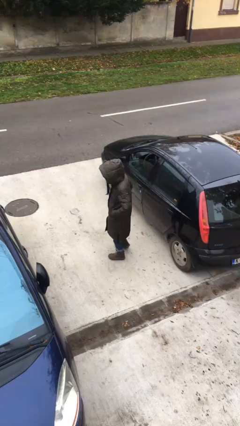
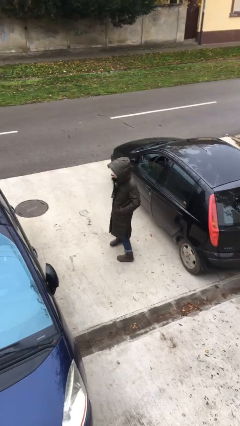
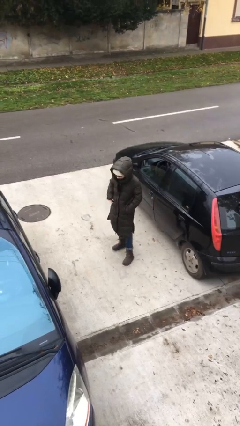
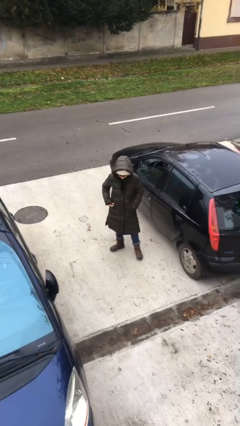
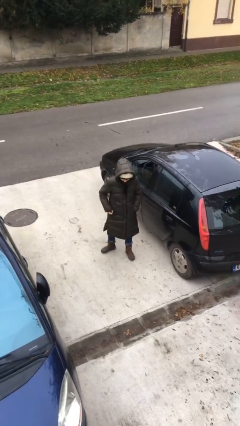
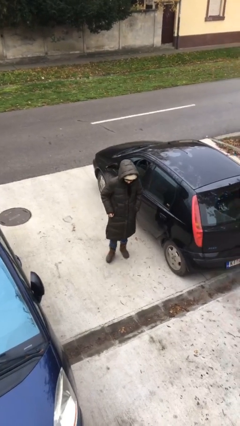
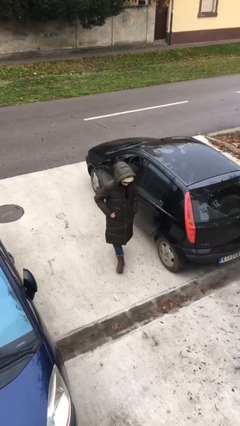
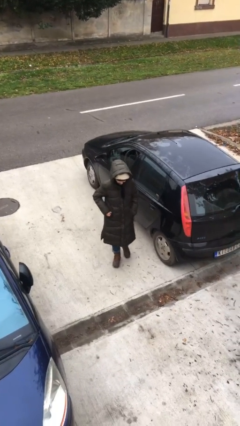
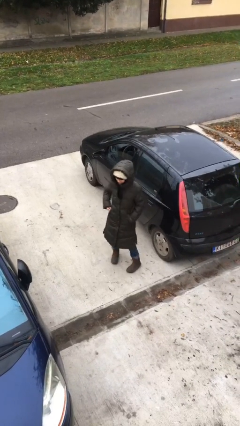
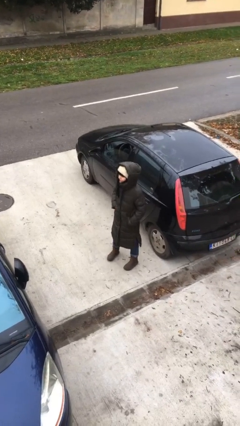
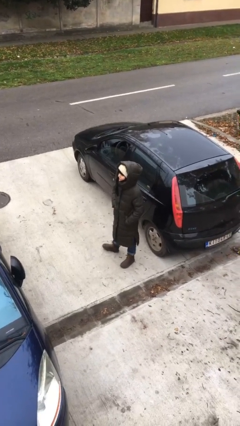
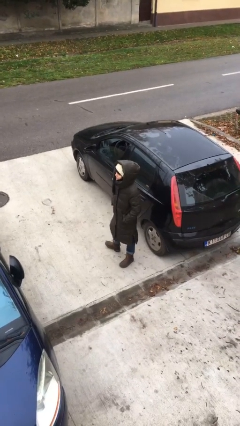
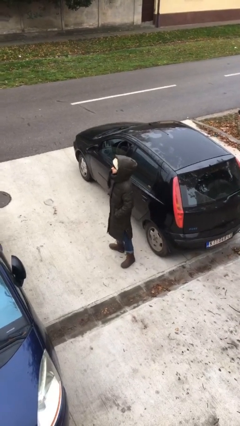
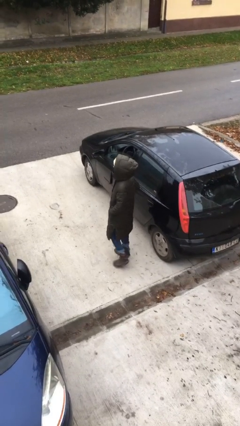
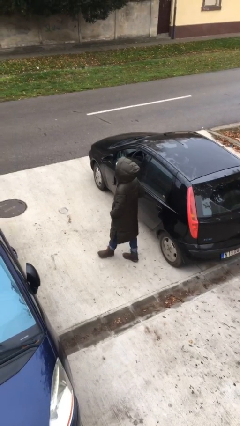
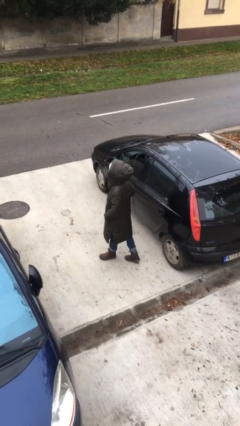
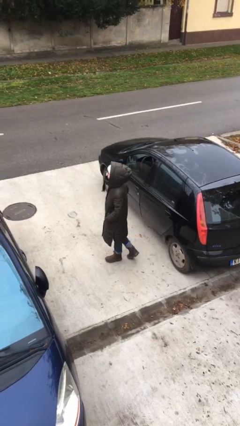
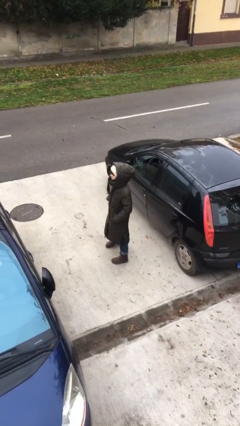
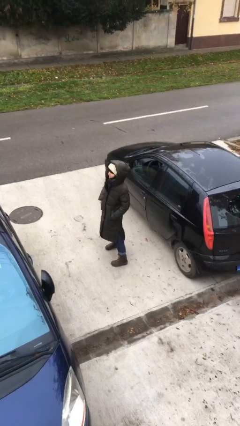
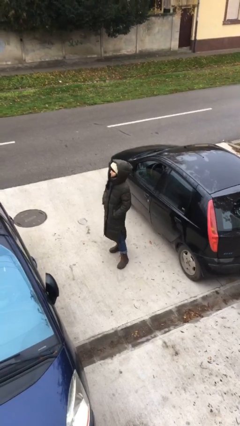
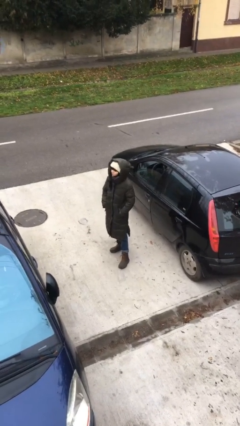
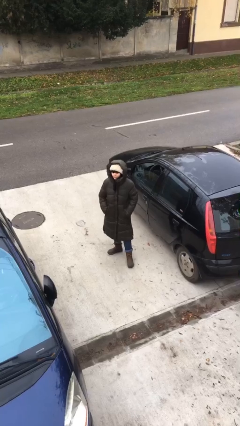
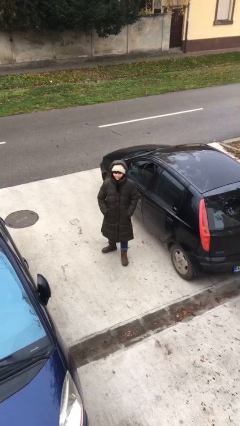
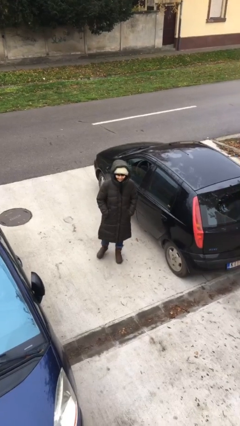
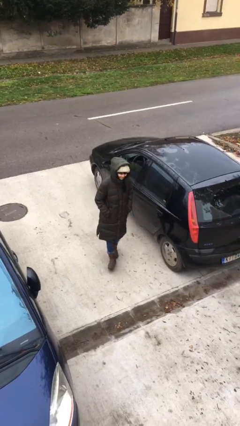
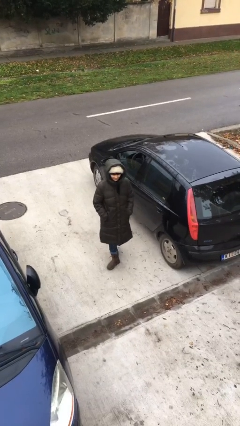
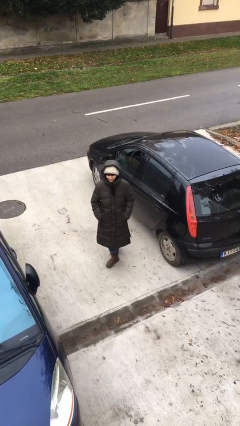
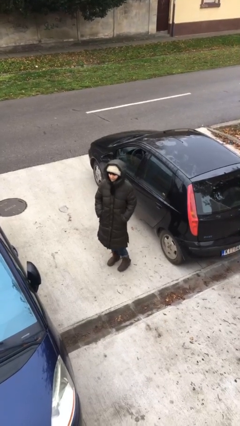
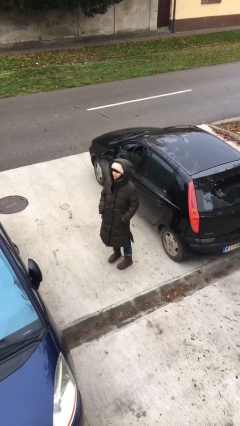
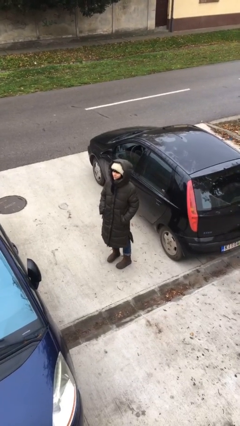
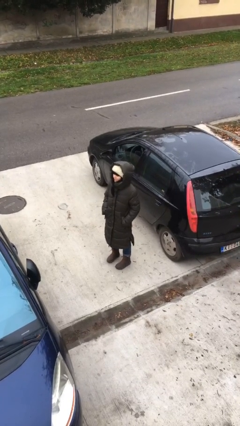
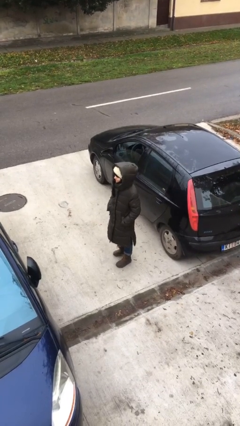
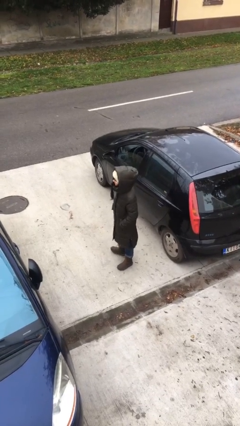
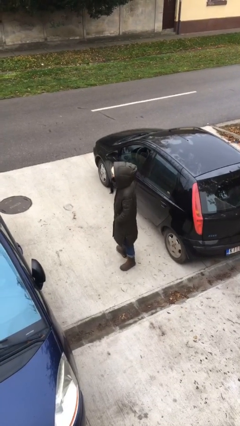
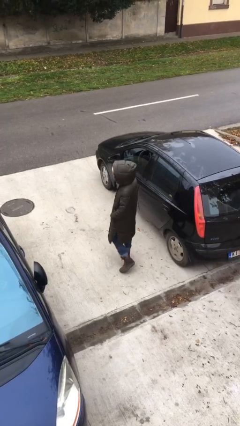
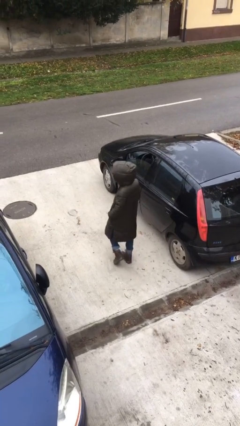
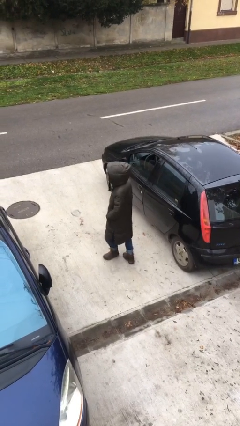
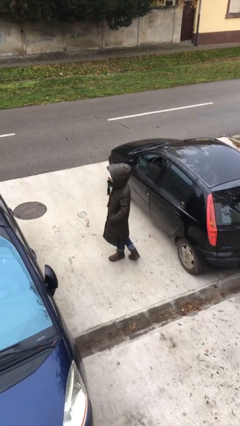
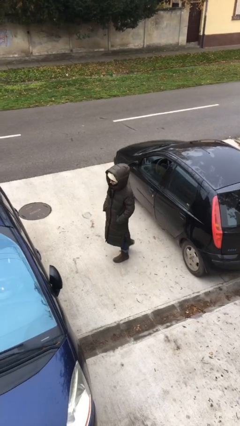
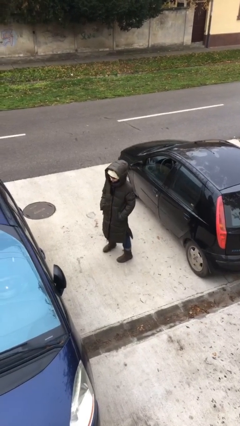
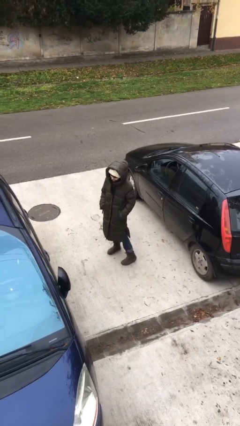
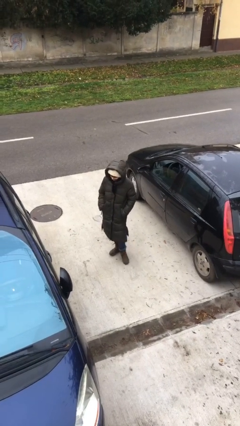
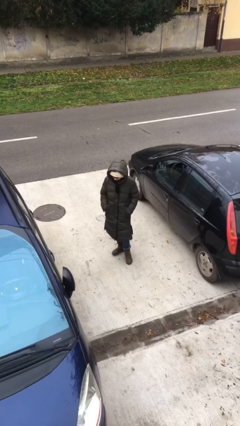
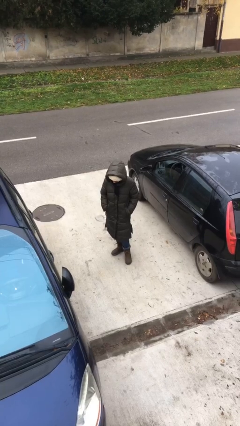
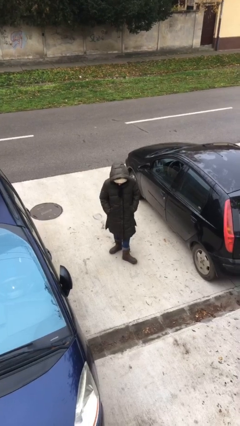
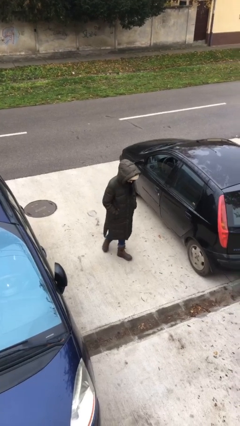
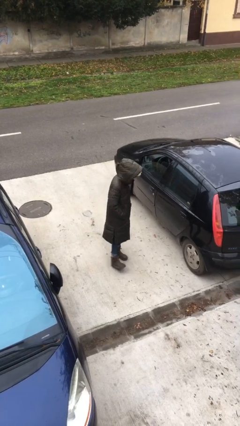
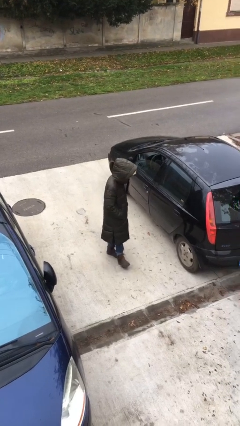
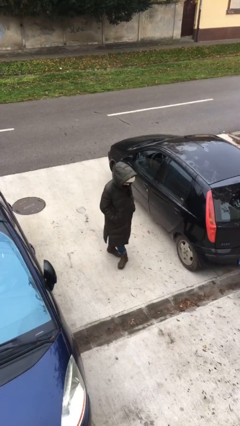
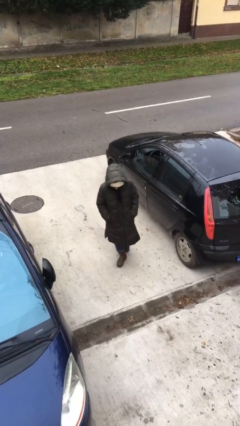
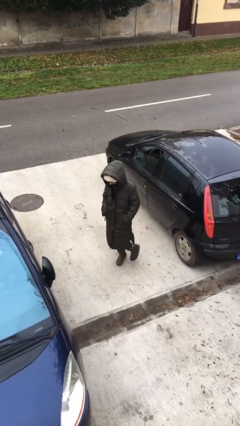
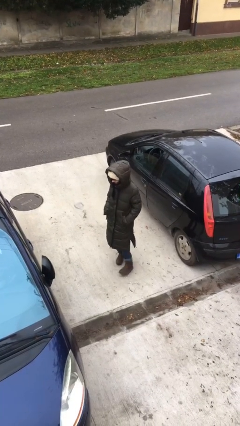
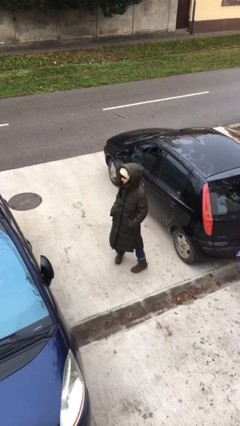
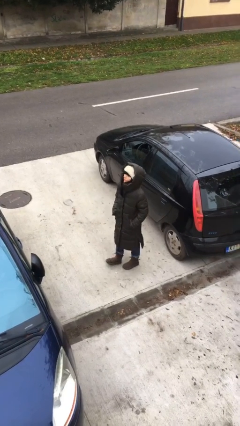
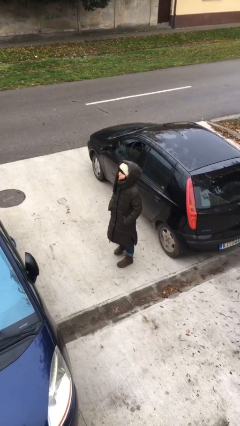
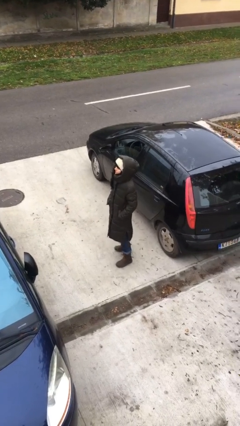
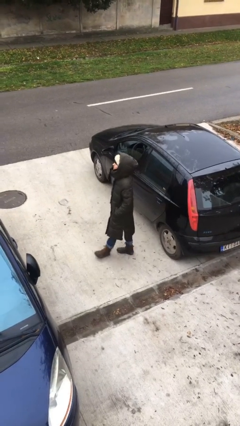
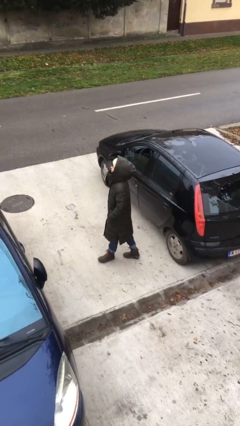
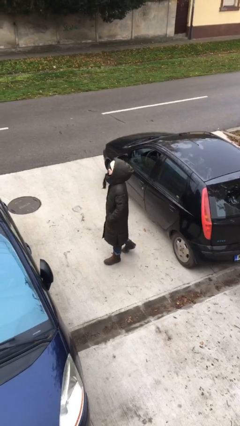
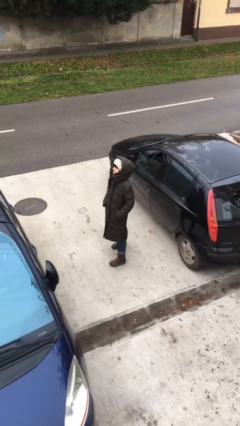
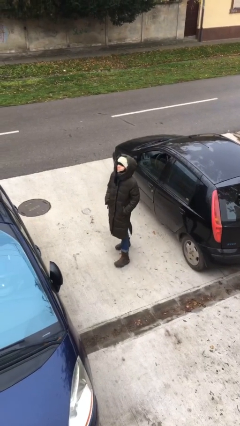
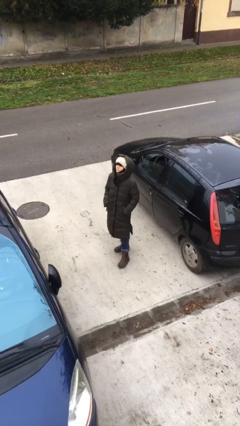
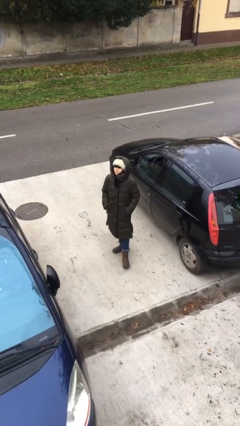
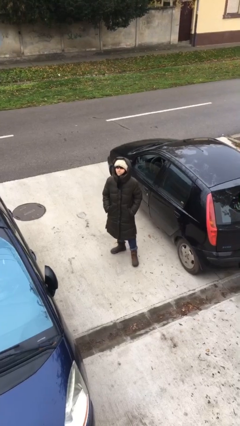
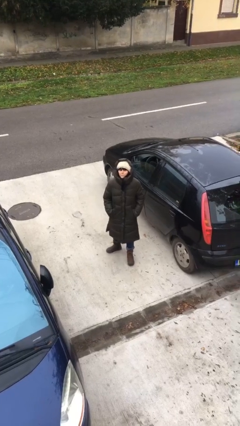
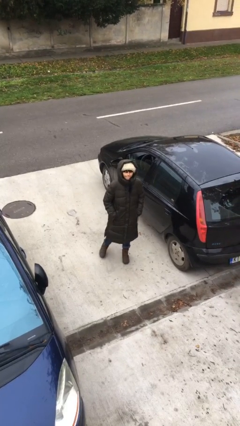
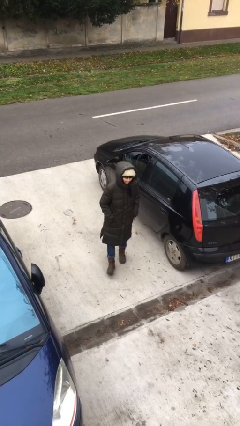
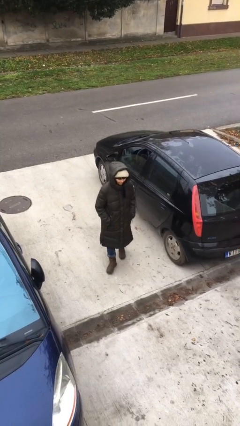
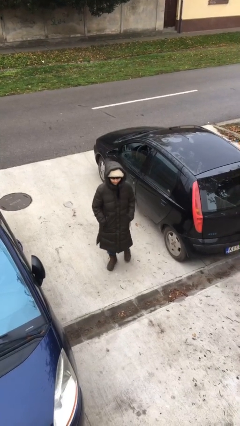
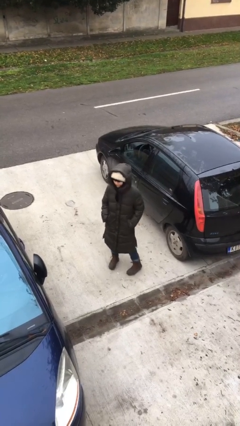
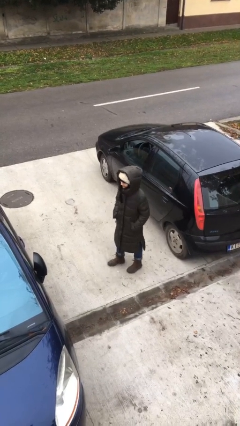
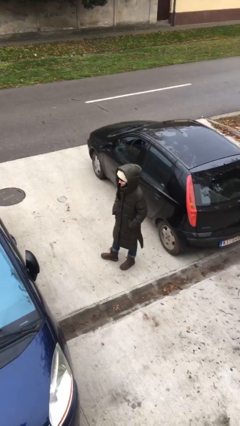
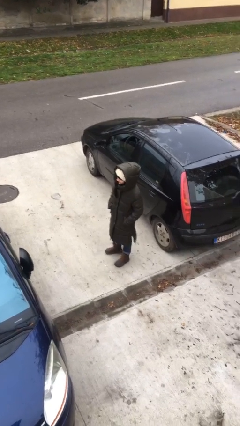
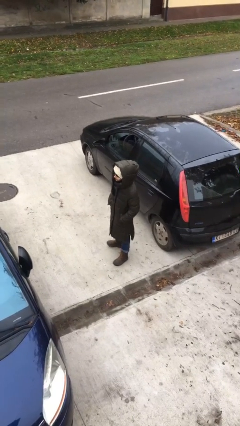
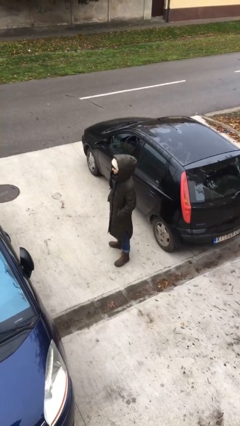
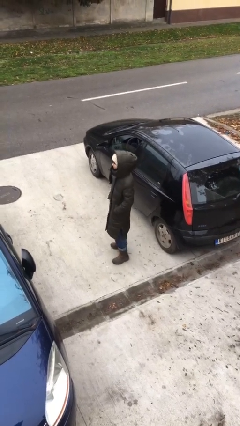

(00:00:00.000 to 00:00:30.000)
person walks

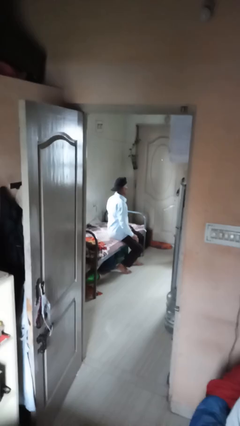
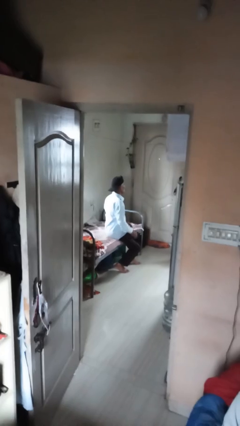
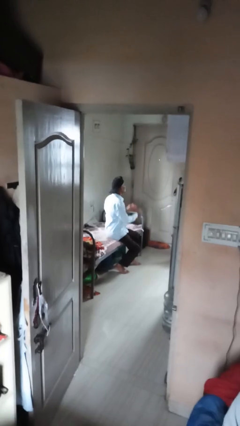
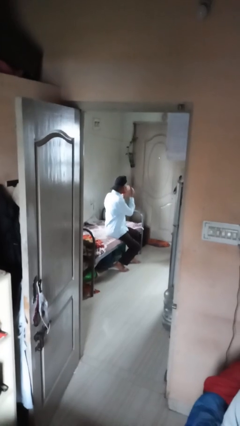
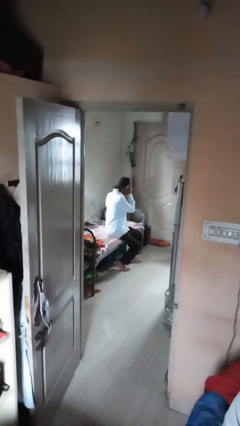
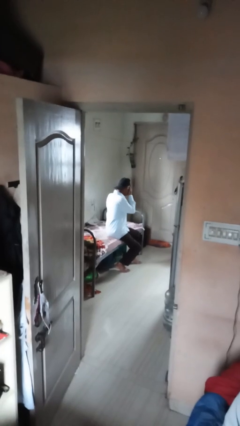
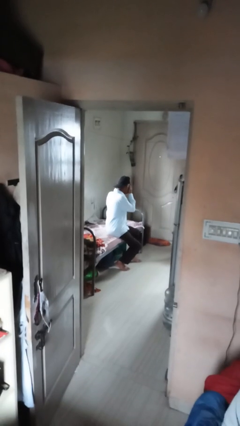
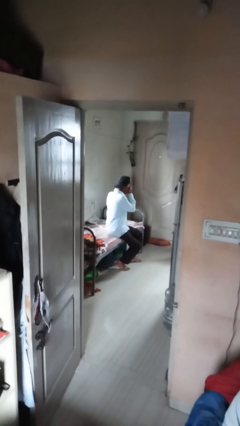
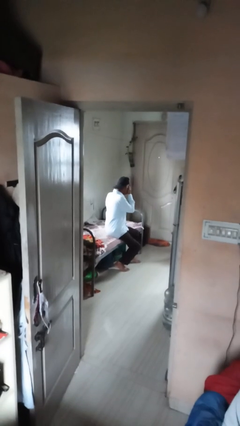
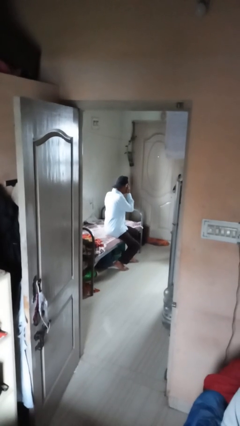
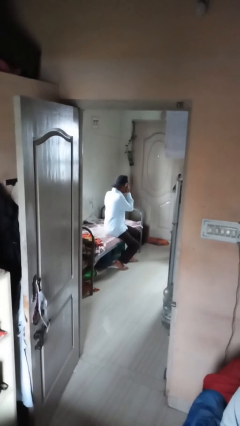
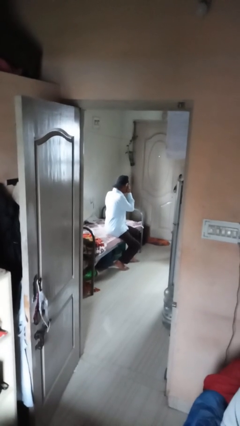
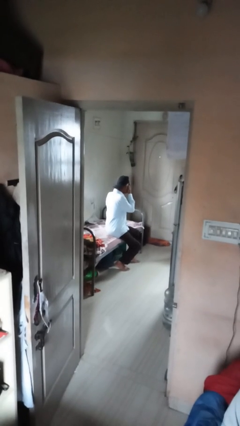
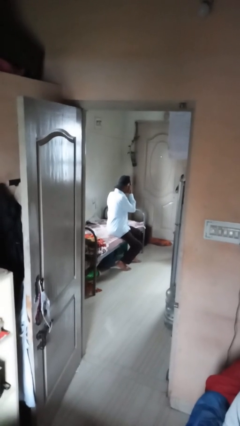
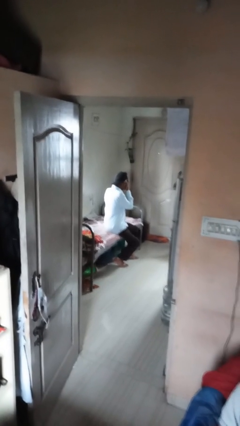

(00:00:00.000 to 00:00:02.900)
person covers face with hands

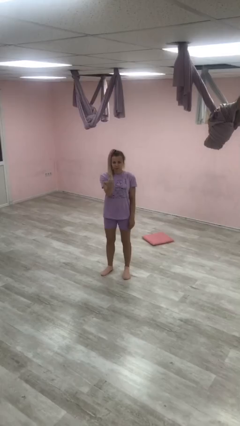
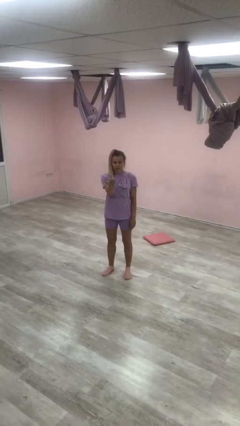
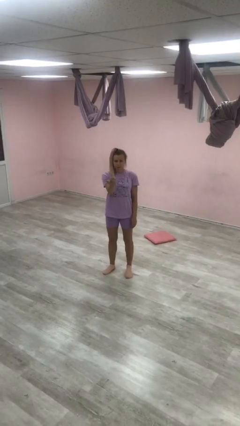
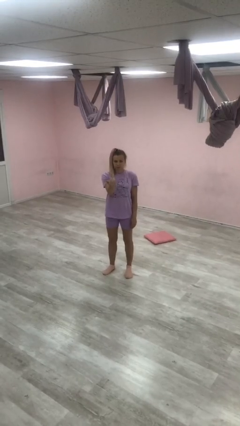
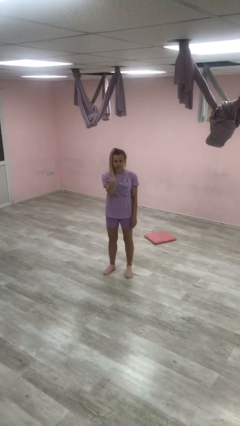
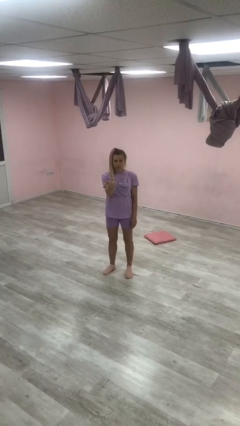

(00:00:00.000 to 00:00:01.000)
person gestures come here
